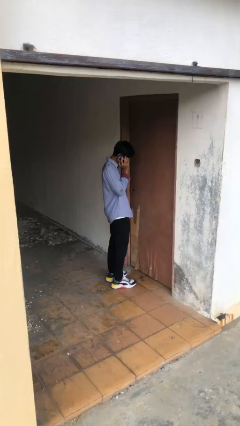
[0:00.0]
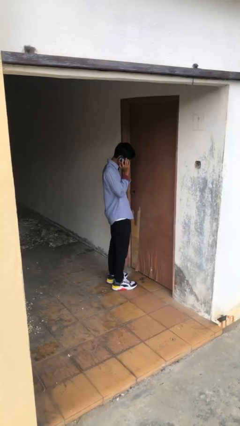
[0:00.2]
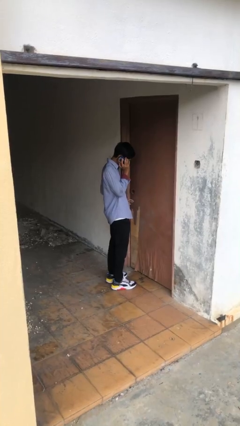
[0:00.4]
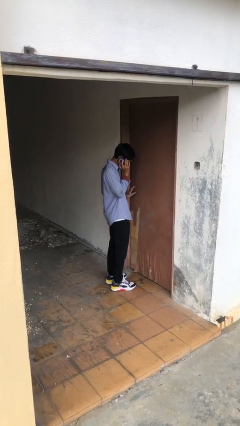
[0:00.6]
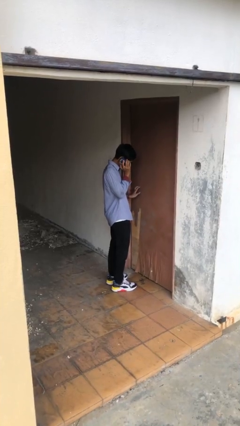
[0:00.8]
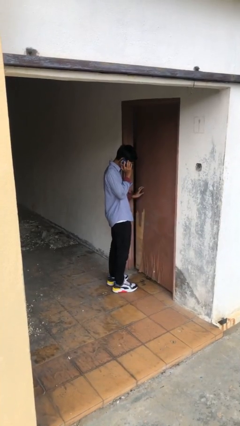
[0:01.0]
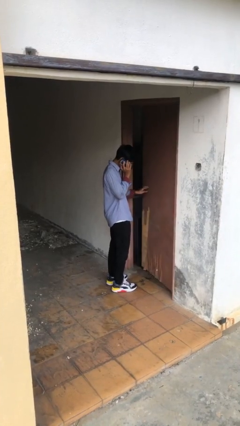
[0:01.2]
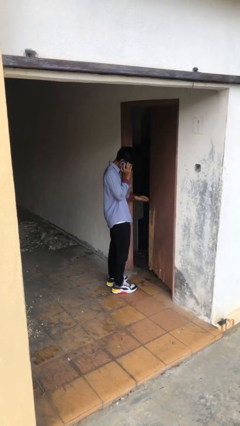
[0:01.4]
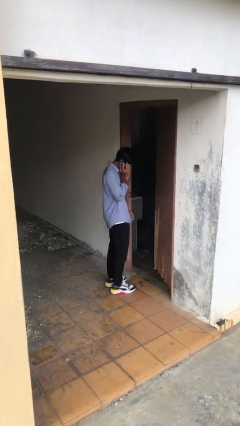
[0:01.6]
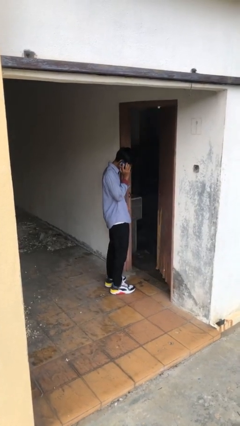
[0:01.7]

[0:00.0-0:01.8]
person opens facility door

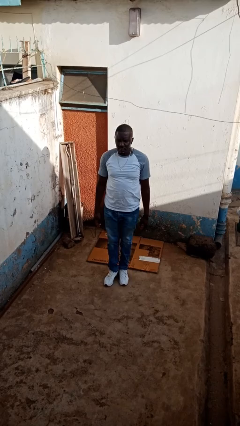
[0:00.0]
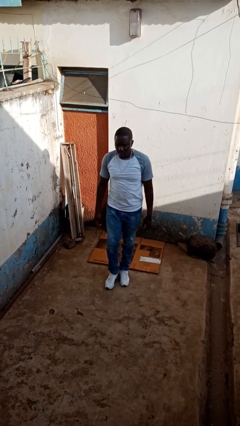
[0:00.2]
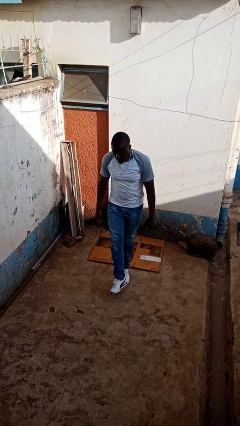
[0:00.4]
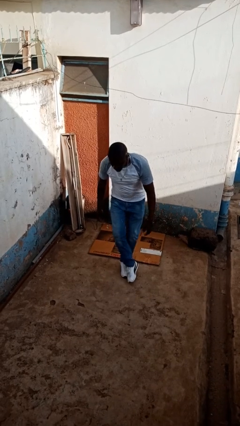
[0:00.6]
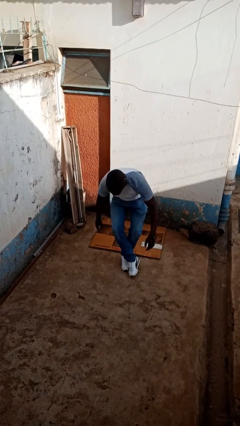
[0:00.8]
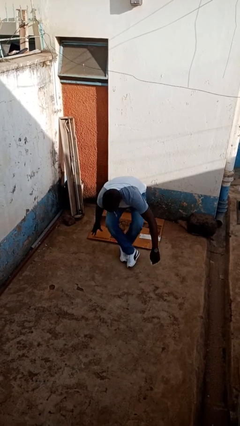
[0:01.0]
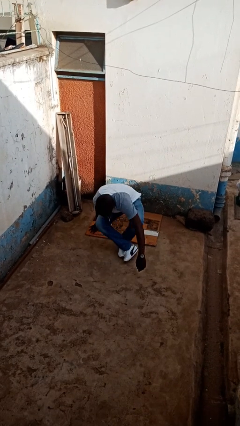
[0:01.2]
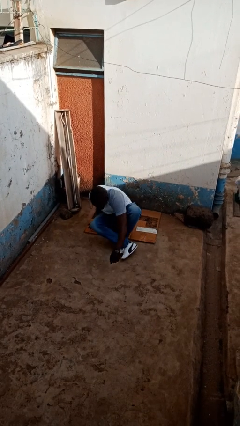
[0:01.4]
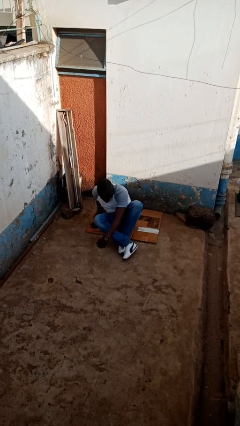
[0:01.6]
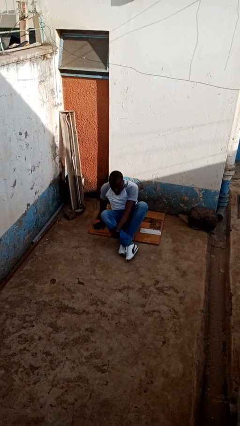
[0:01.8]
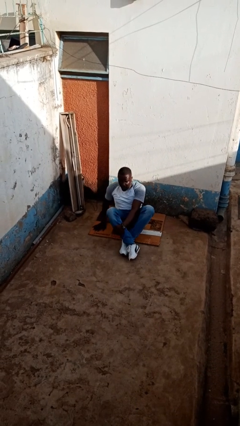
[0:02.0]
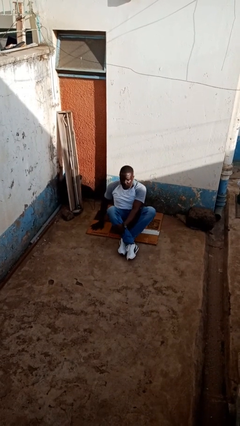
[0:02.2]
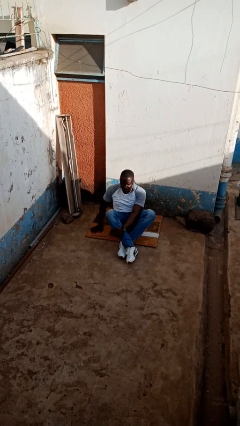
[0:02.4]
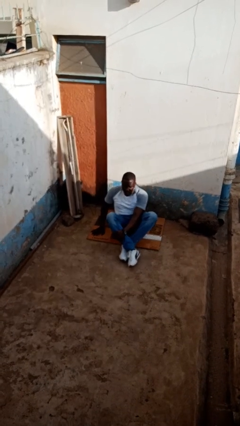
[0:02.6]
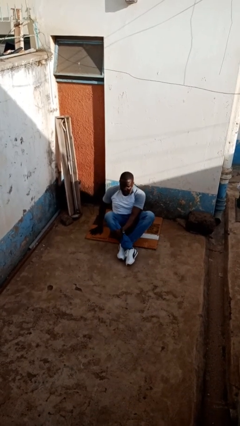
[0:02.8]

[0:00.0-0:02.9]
person sits crisscross

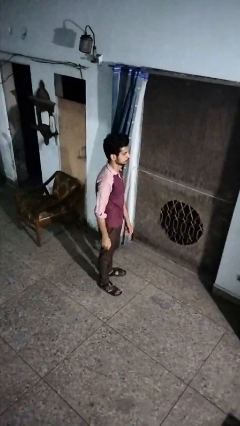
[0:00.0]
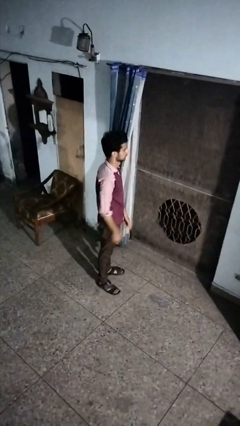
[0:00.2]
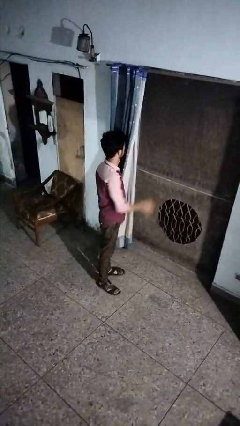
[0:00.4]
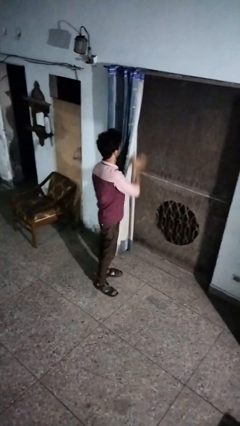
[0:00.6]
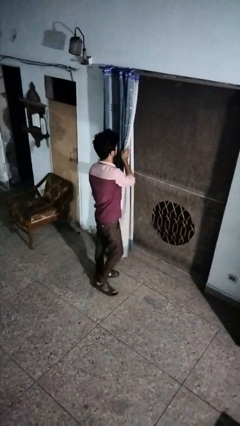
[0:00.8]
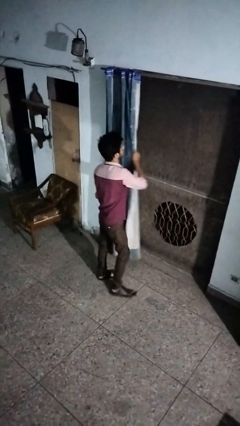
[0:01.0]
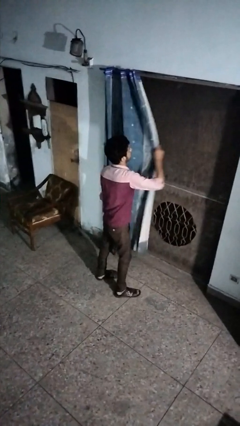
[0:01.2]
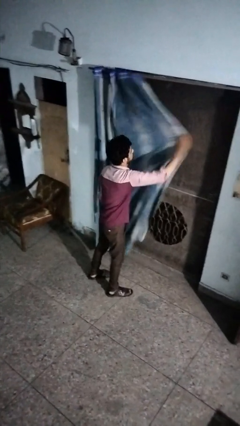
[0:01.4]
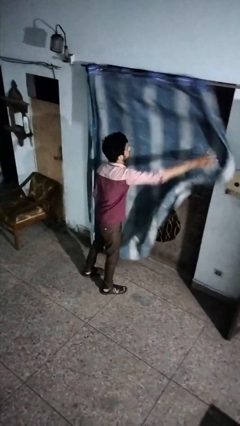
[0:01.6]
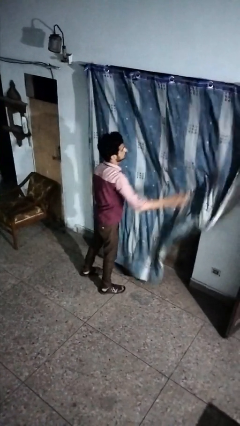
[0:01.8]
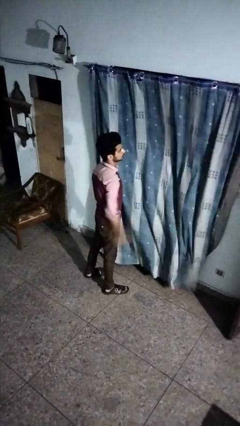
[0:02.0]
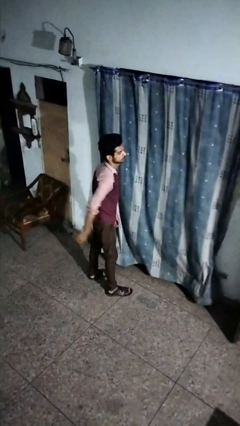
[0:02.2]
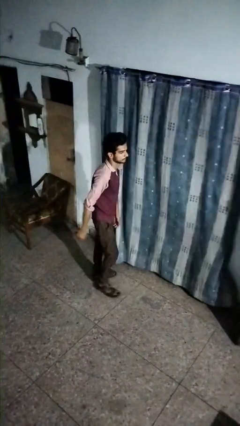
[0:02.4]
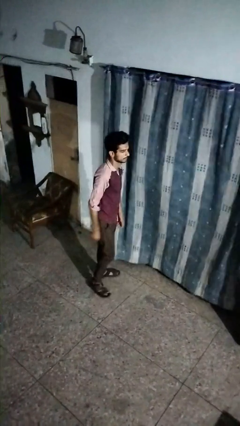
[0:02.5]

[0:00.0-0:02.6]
person closes curtains

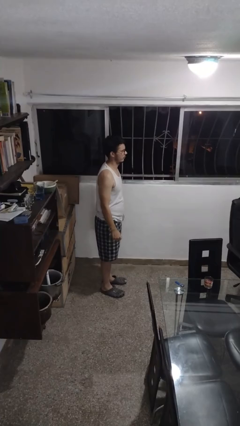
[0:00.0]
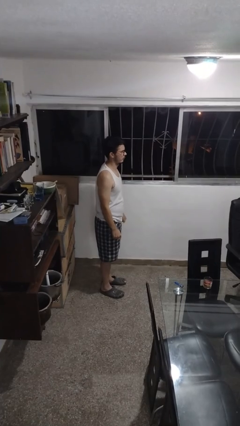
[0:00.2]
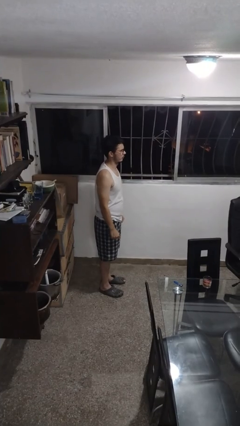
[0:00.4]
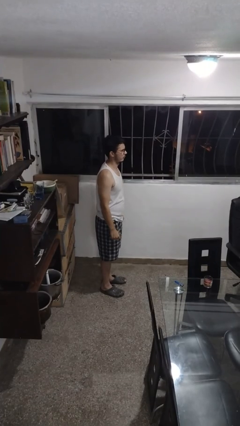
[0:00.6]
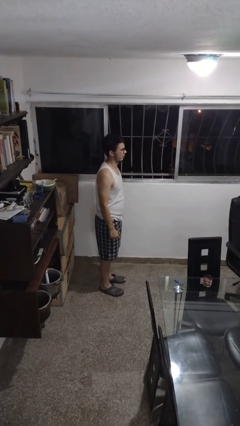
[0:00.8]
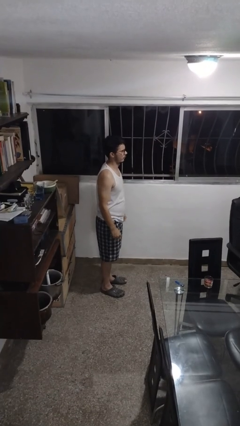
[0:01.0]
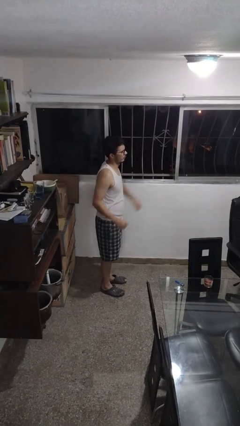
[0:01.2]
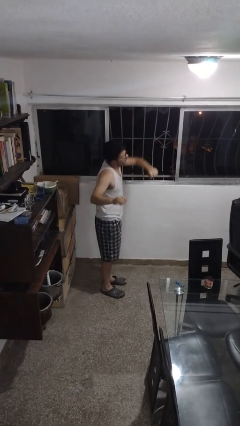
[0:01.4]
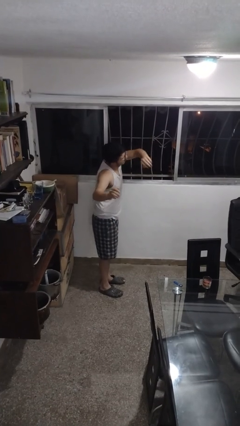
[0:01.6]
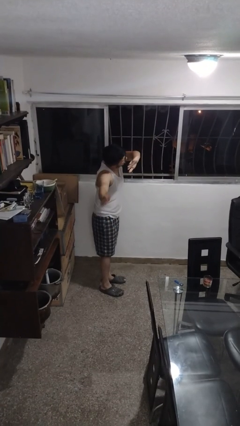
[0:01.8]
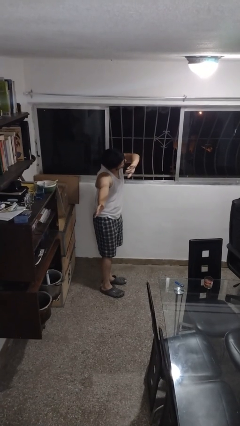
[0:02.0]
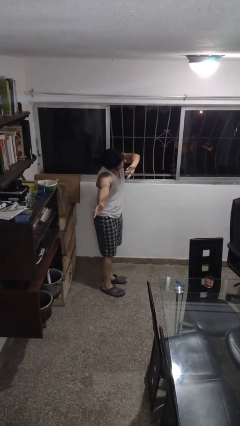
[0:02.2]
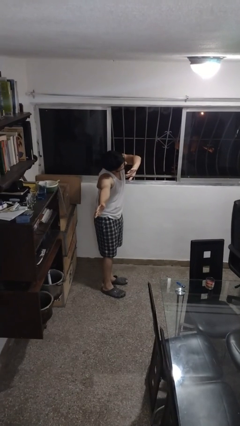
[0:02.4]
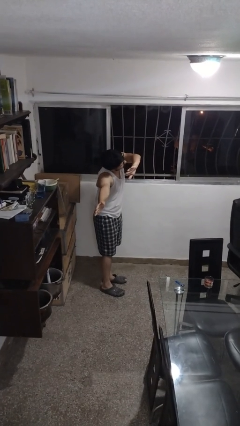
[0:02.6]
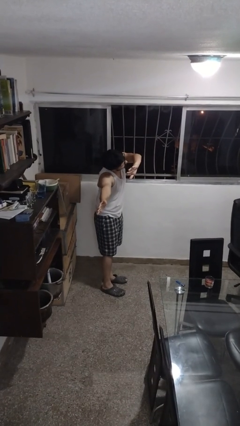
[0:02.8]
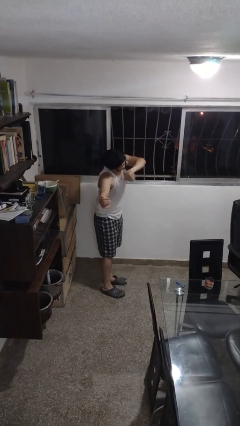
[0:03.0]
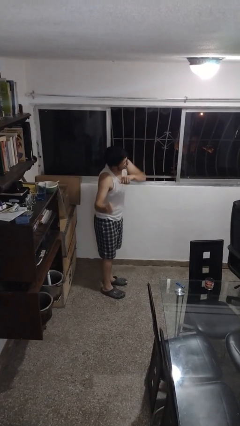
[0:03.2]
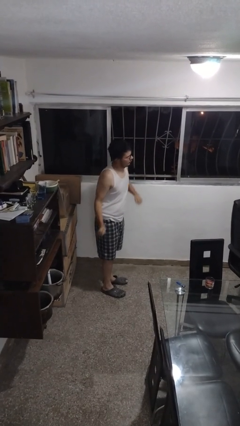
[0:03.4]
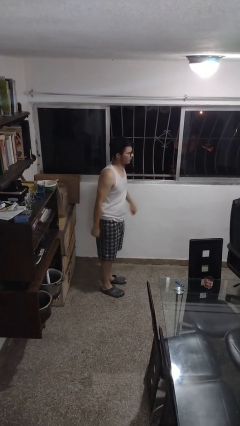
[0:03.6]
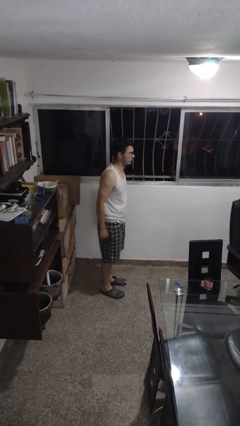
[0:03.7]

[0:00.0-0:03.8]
person stretches arms to side

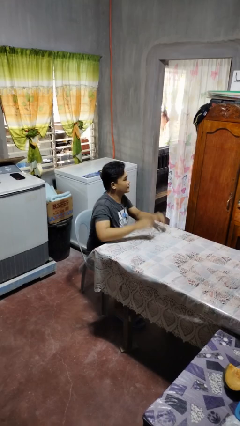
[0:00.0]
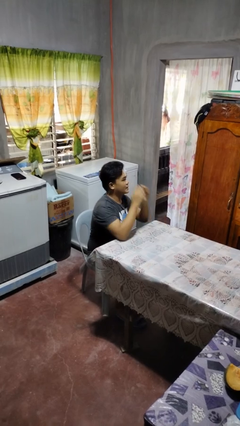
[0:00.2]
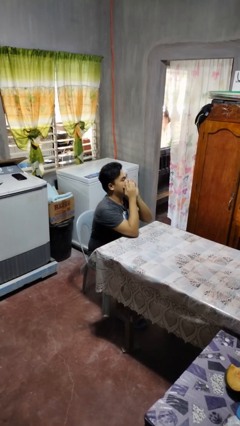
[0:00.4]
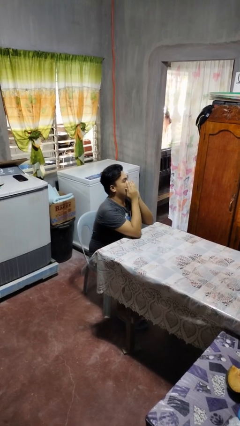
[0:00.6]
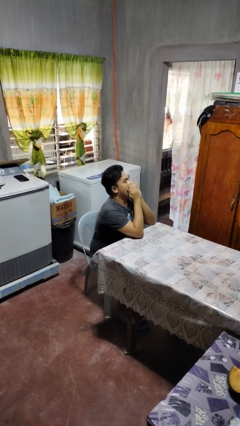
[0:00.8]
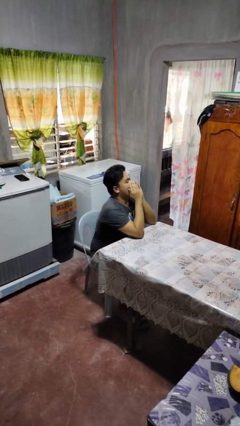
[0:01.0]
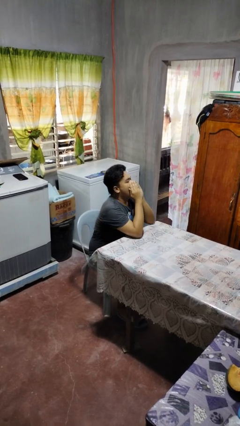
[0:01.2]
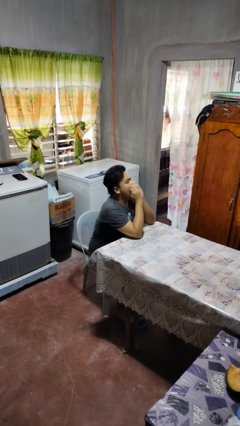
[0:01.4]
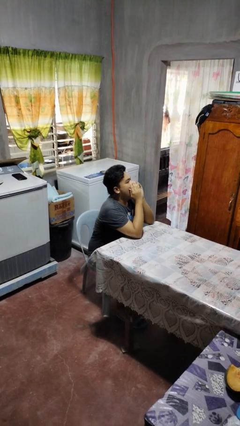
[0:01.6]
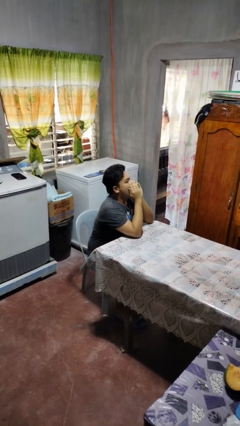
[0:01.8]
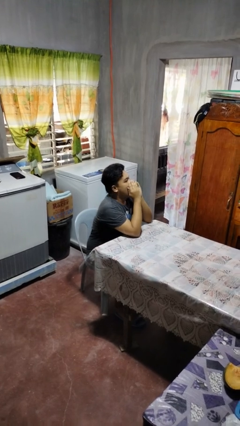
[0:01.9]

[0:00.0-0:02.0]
person yawns

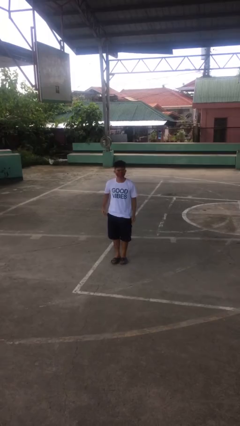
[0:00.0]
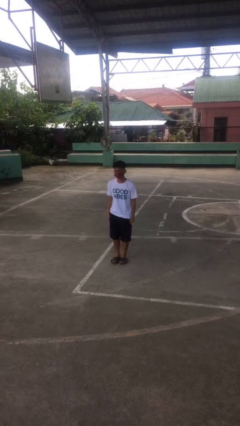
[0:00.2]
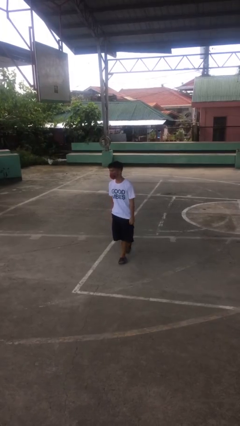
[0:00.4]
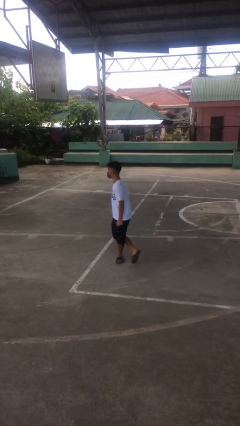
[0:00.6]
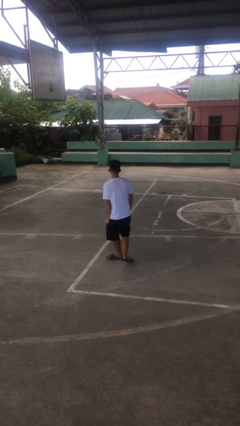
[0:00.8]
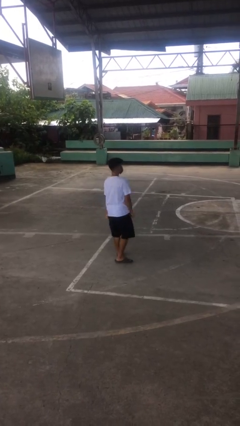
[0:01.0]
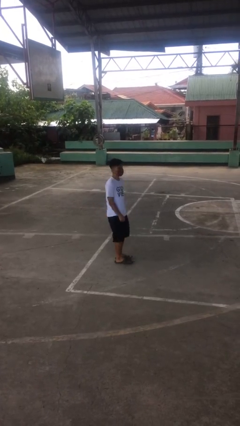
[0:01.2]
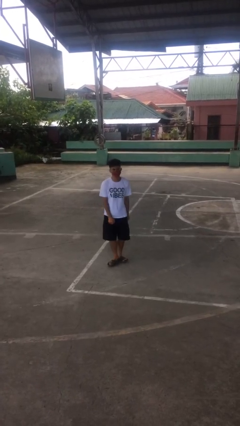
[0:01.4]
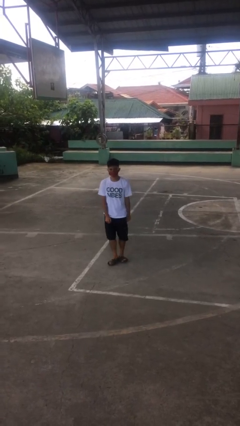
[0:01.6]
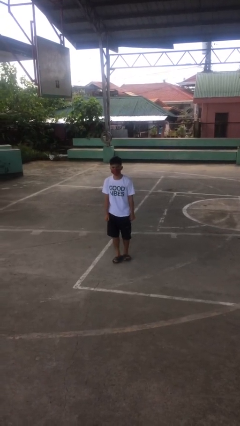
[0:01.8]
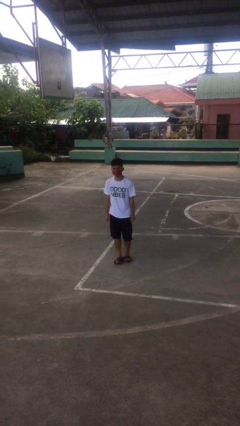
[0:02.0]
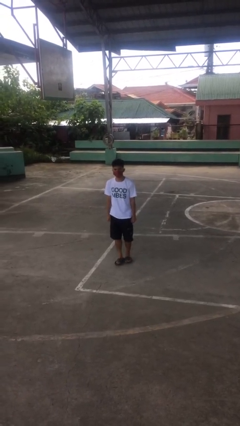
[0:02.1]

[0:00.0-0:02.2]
person twirls

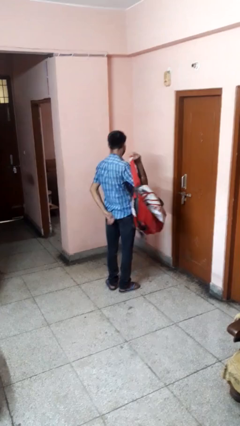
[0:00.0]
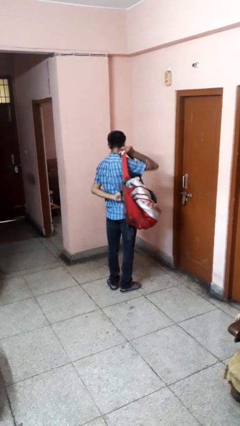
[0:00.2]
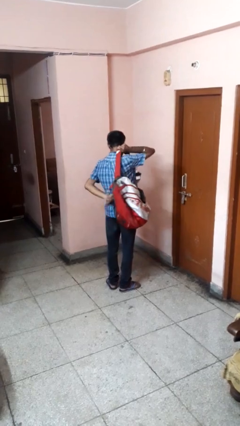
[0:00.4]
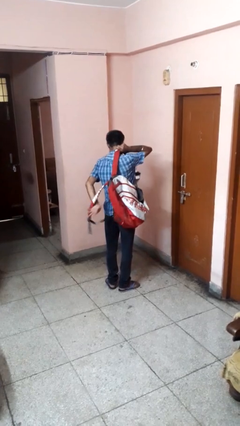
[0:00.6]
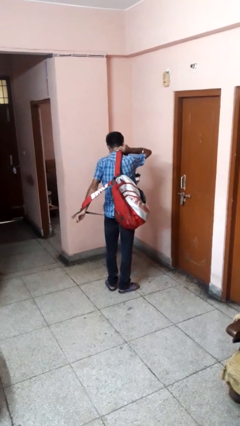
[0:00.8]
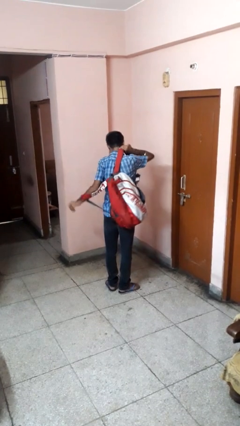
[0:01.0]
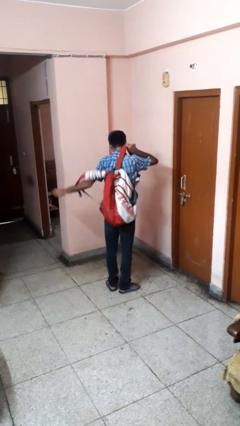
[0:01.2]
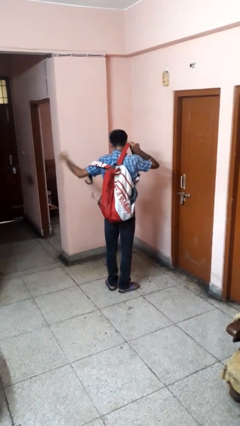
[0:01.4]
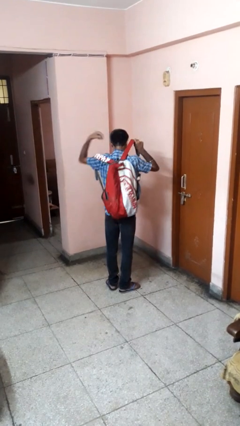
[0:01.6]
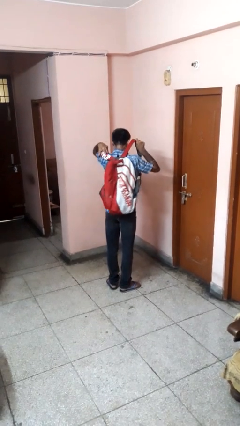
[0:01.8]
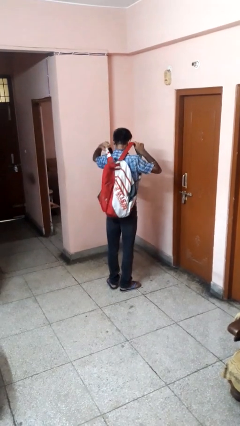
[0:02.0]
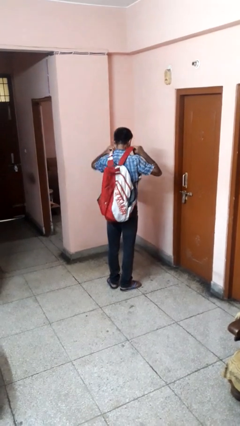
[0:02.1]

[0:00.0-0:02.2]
person puts on backpack
